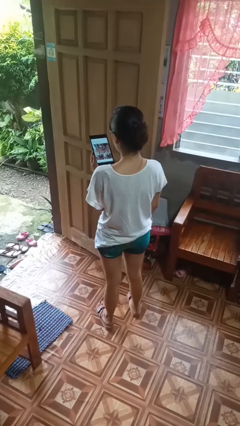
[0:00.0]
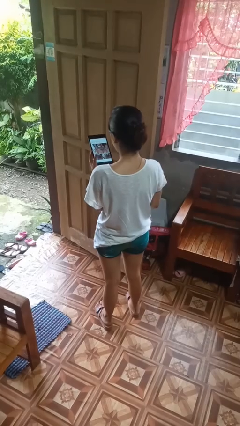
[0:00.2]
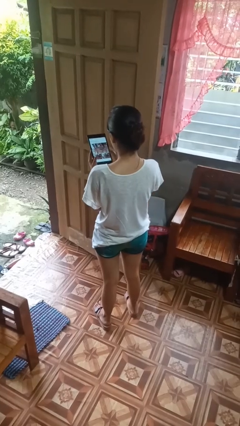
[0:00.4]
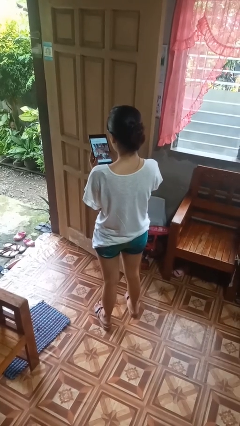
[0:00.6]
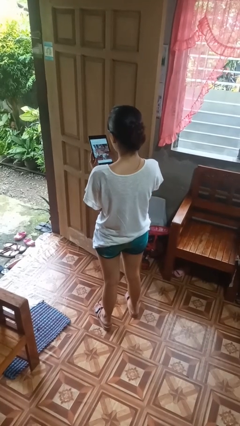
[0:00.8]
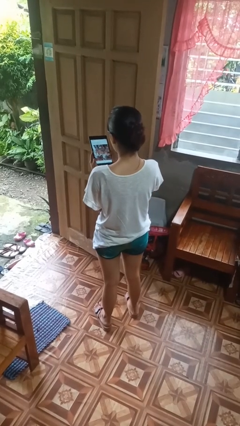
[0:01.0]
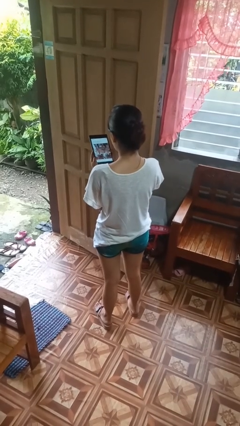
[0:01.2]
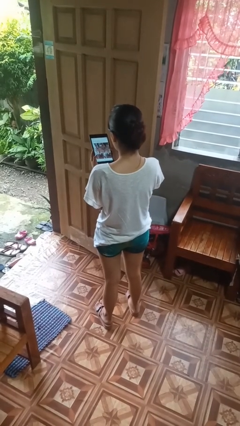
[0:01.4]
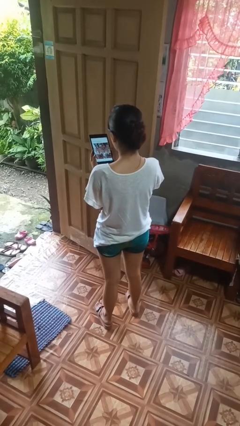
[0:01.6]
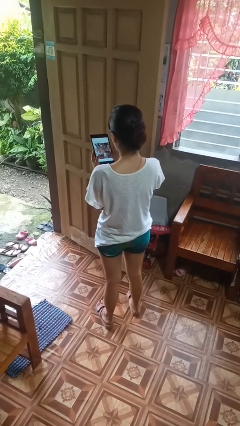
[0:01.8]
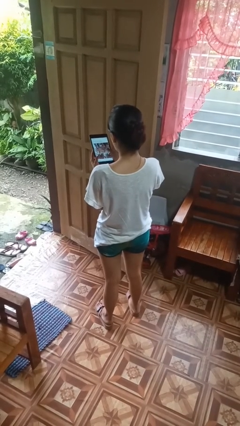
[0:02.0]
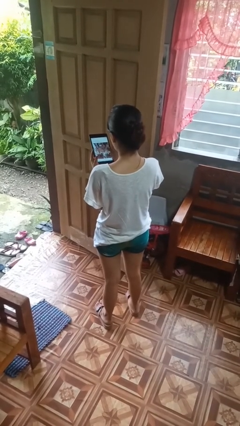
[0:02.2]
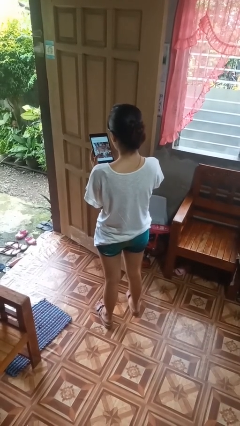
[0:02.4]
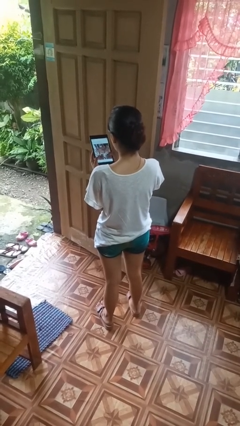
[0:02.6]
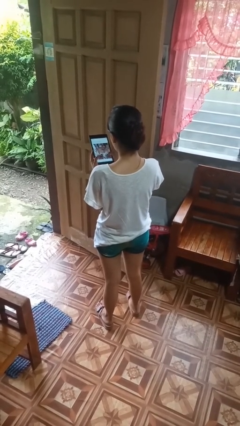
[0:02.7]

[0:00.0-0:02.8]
person interacts with tablet

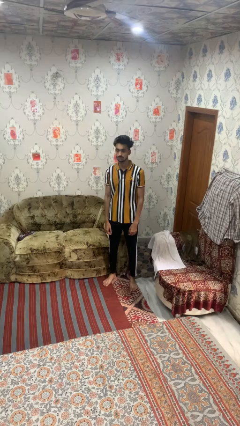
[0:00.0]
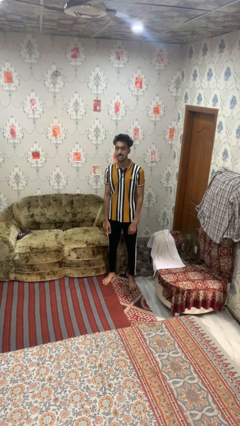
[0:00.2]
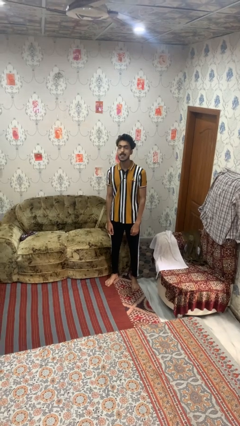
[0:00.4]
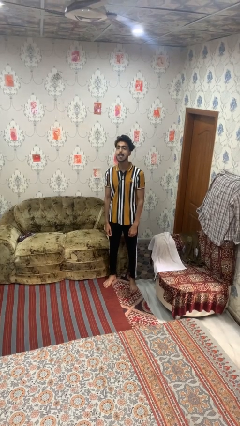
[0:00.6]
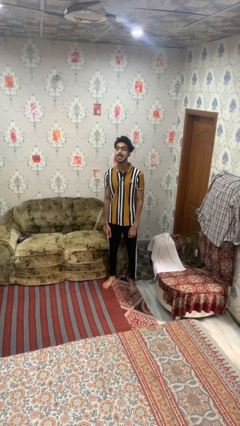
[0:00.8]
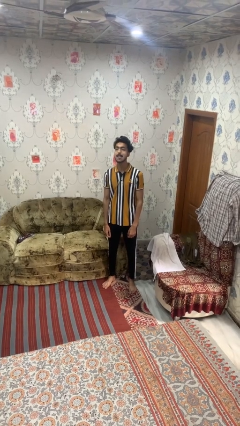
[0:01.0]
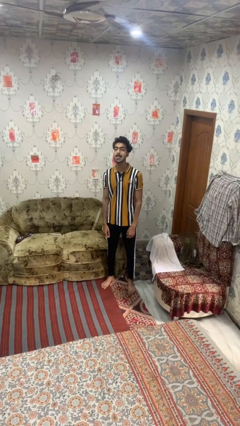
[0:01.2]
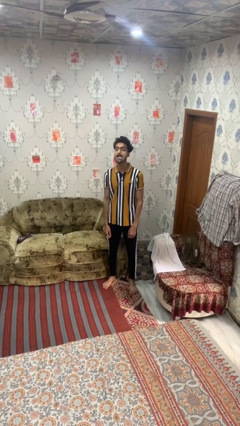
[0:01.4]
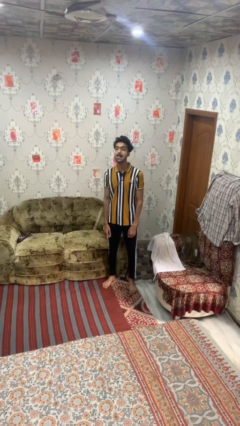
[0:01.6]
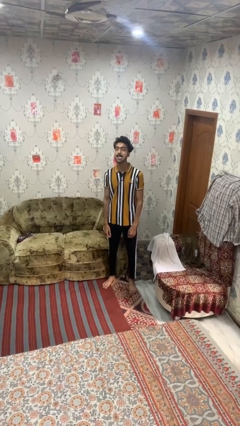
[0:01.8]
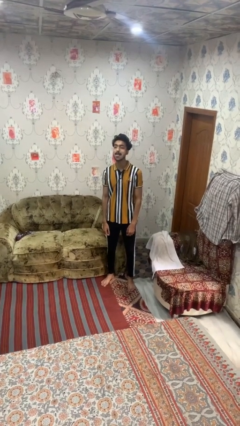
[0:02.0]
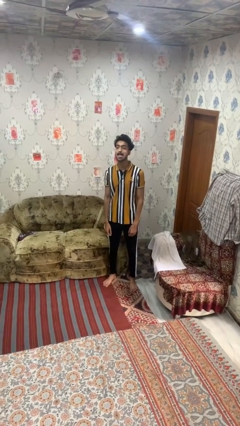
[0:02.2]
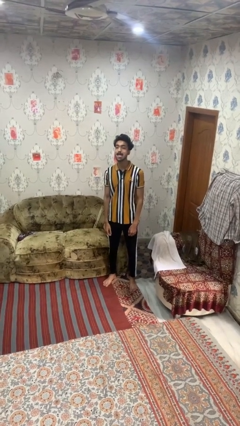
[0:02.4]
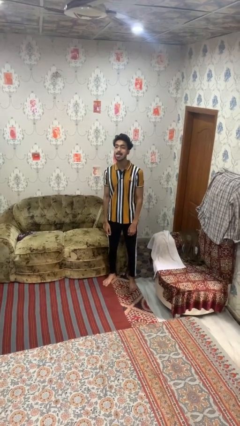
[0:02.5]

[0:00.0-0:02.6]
person sticks out tongue

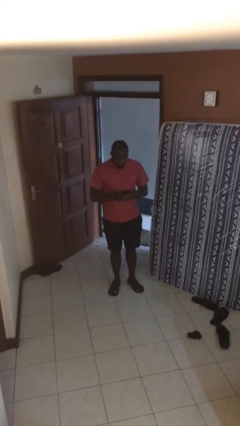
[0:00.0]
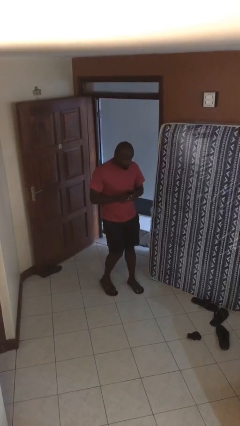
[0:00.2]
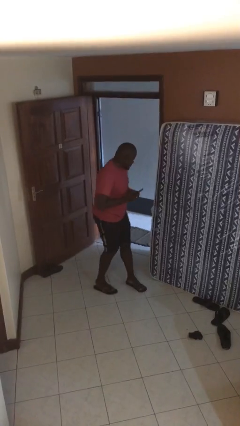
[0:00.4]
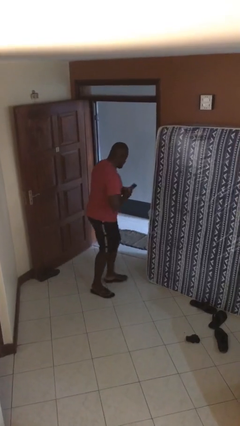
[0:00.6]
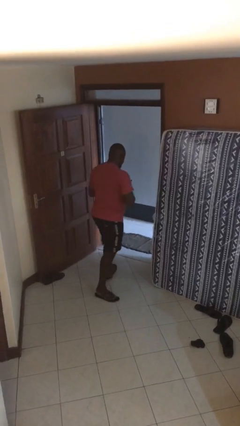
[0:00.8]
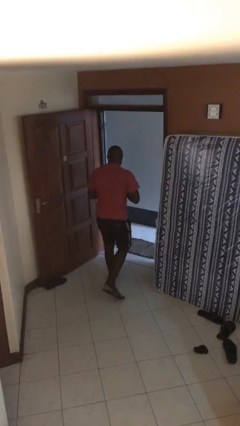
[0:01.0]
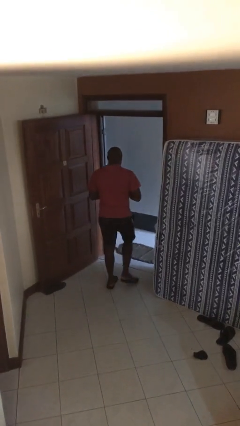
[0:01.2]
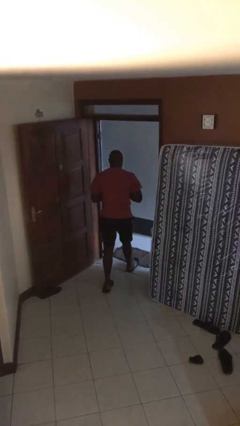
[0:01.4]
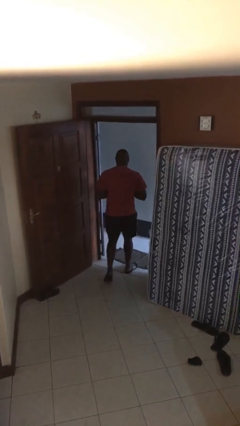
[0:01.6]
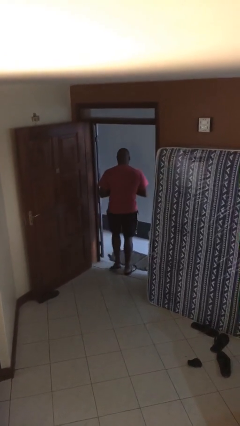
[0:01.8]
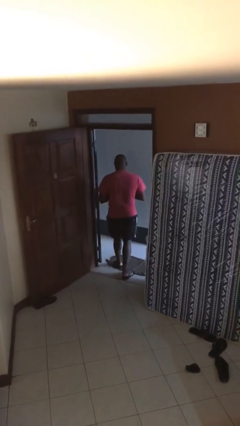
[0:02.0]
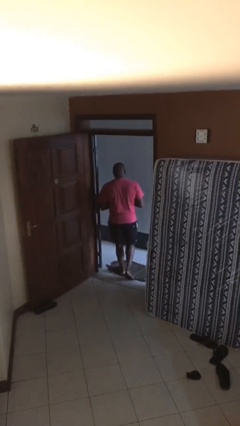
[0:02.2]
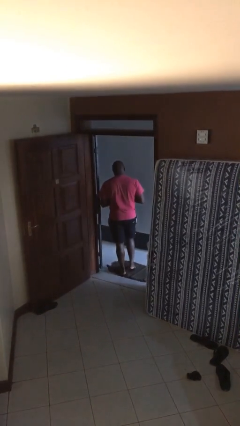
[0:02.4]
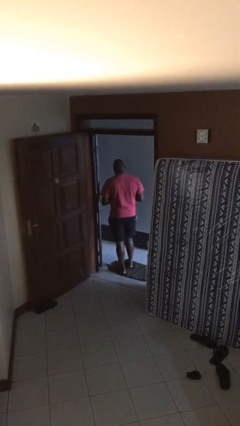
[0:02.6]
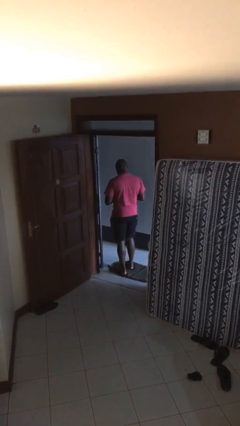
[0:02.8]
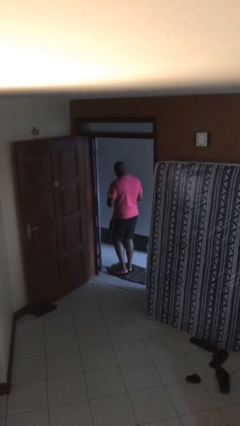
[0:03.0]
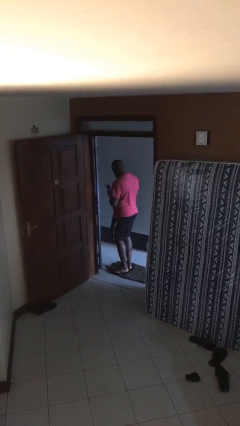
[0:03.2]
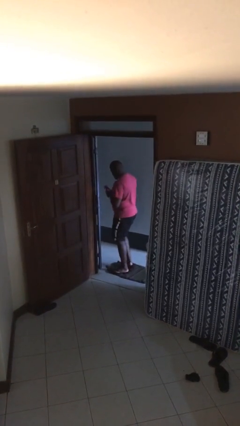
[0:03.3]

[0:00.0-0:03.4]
person exits scene through structure

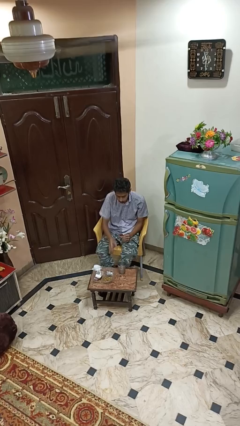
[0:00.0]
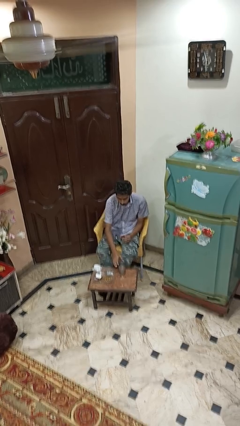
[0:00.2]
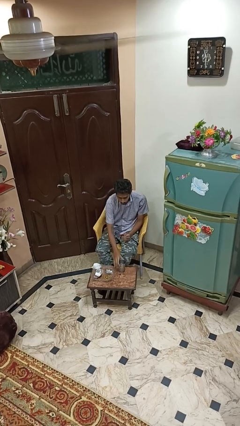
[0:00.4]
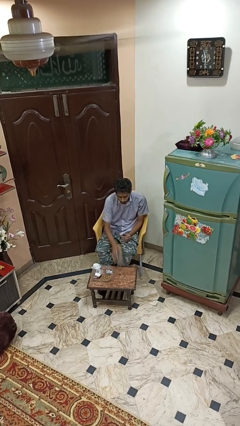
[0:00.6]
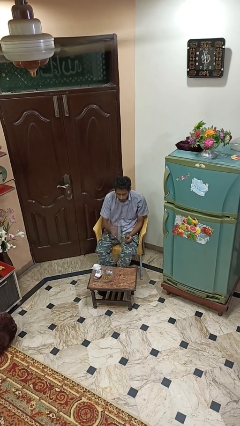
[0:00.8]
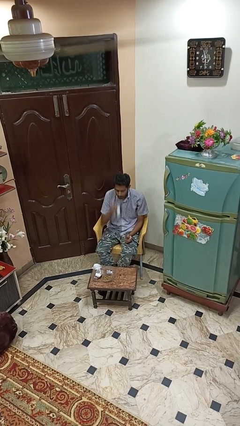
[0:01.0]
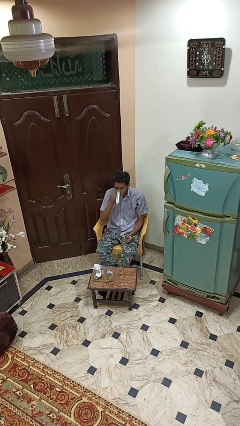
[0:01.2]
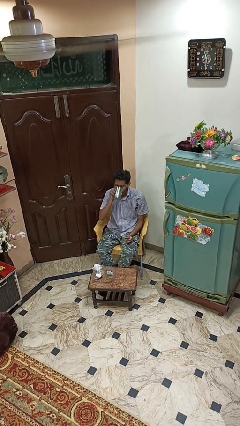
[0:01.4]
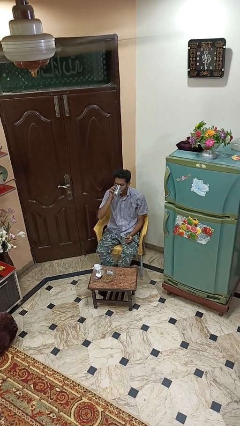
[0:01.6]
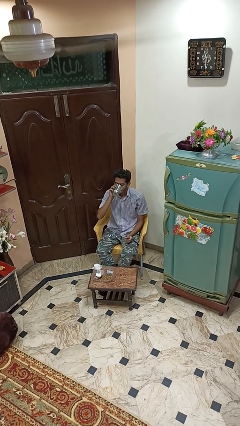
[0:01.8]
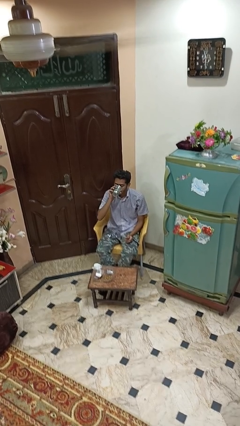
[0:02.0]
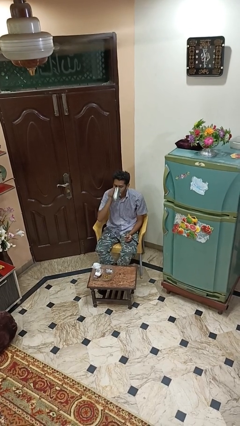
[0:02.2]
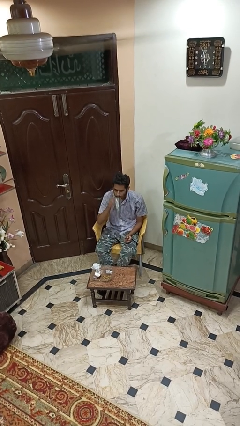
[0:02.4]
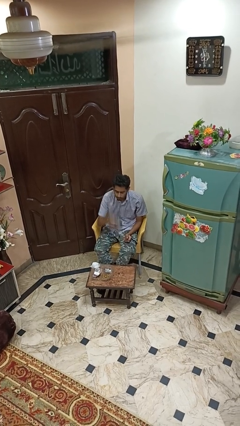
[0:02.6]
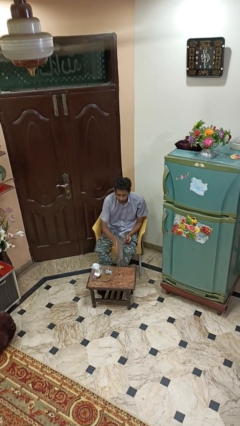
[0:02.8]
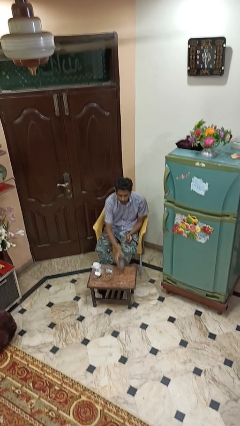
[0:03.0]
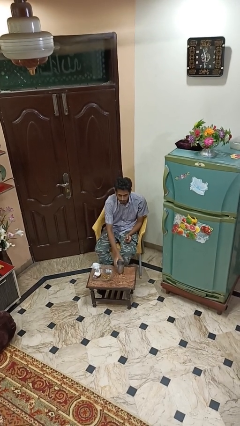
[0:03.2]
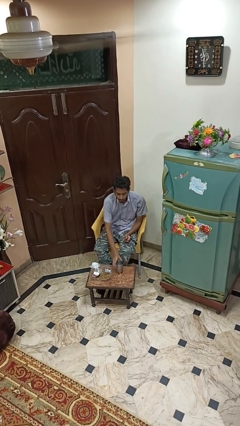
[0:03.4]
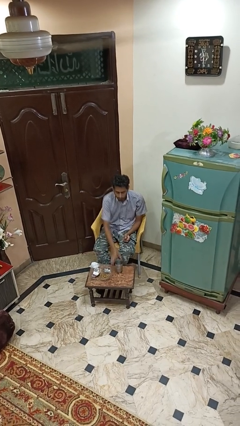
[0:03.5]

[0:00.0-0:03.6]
person drinks from cup

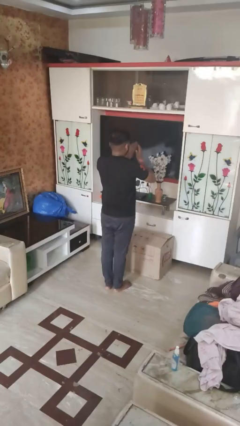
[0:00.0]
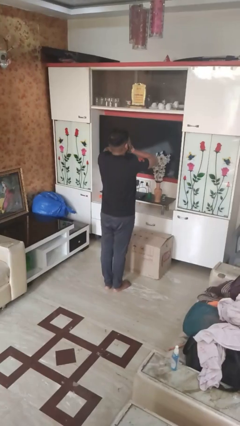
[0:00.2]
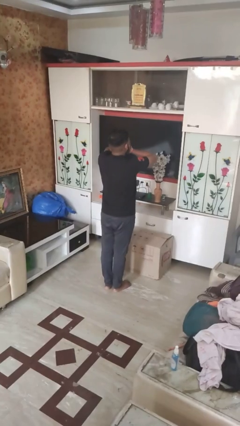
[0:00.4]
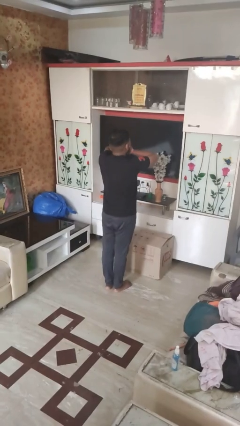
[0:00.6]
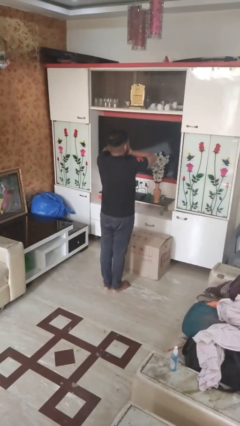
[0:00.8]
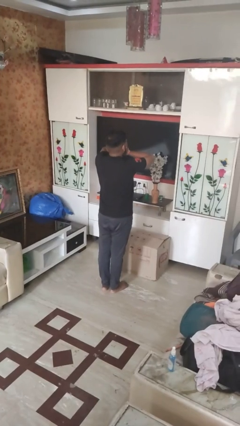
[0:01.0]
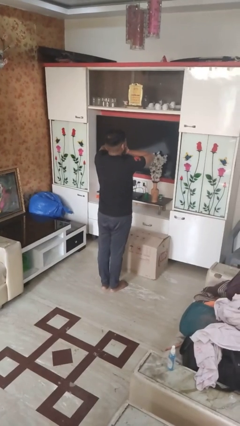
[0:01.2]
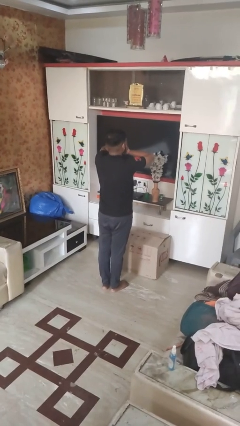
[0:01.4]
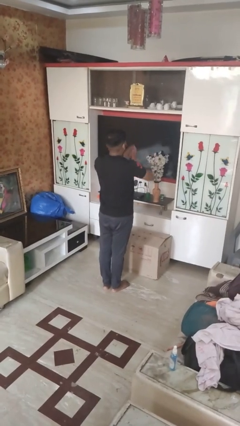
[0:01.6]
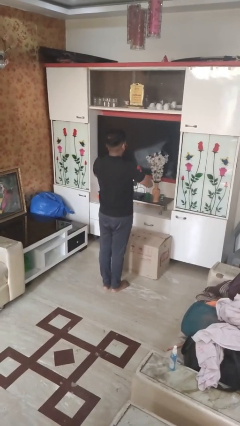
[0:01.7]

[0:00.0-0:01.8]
person covers face with hands

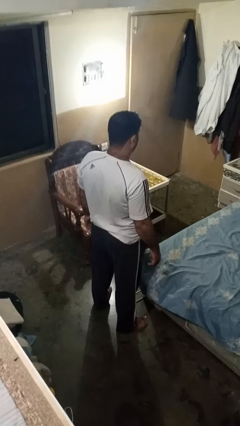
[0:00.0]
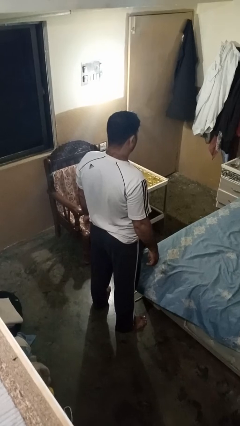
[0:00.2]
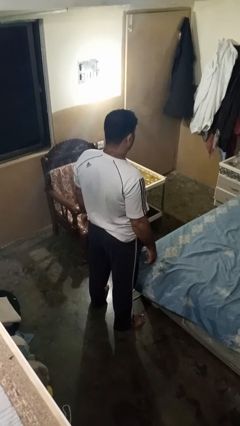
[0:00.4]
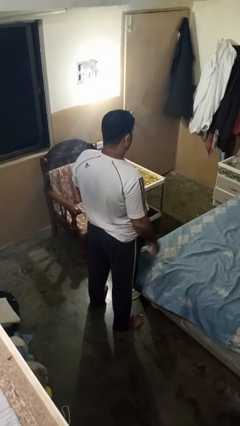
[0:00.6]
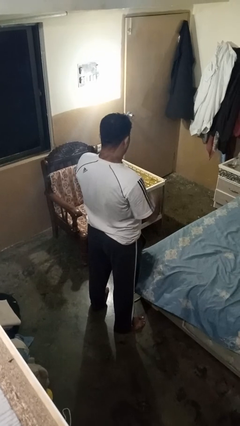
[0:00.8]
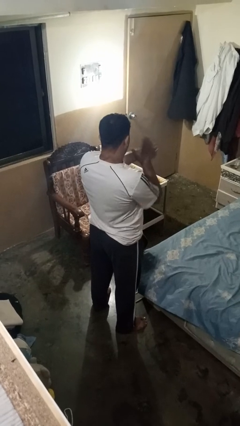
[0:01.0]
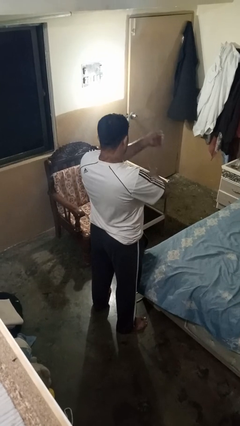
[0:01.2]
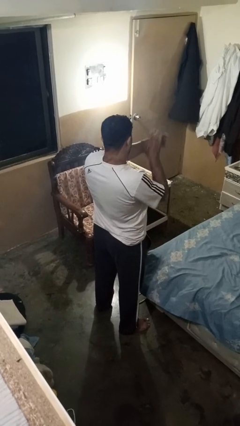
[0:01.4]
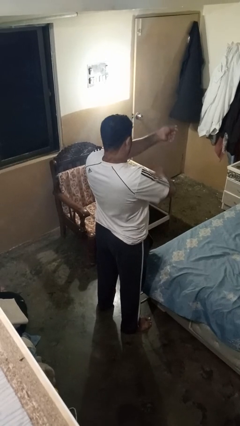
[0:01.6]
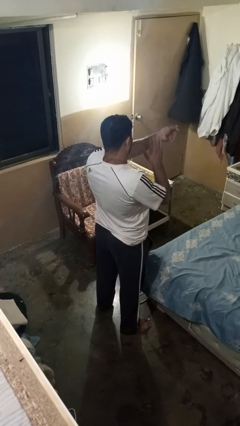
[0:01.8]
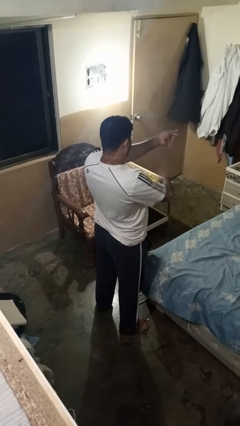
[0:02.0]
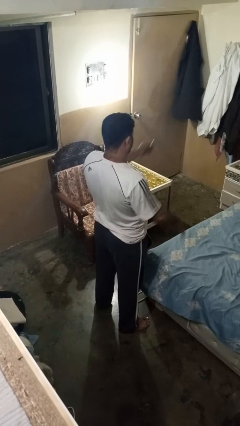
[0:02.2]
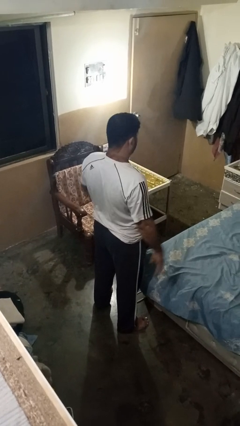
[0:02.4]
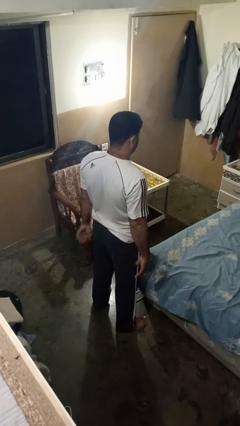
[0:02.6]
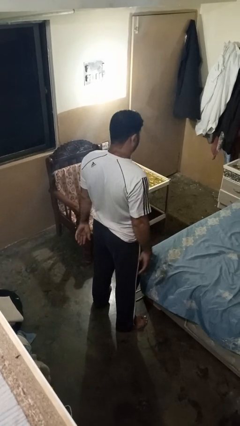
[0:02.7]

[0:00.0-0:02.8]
person swats bug
